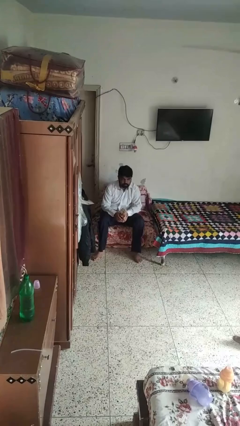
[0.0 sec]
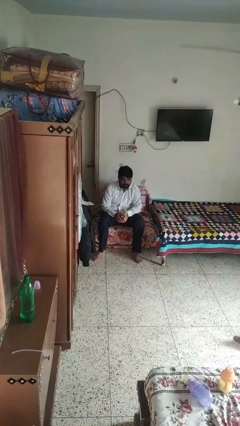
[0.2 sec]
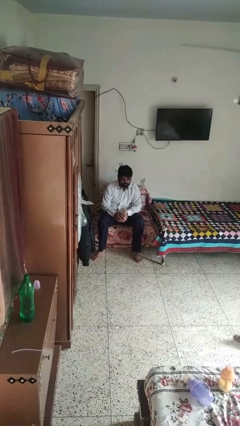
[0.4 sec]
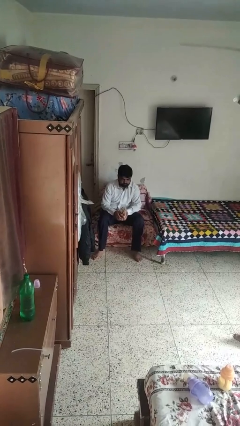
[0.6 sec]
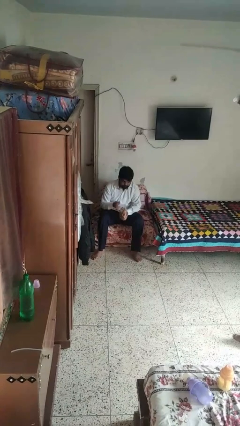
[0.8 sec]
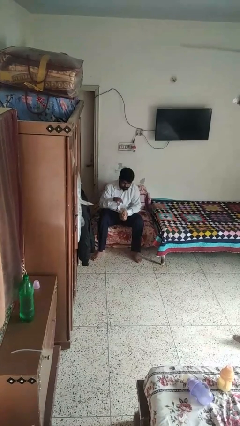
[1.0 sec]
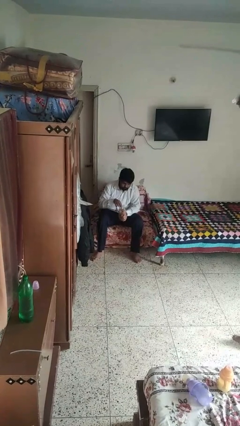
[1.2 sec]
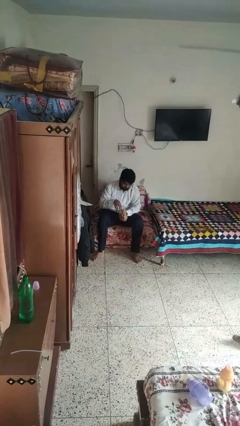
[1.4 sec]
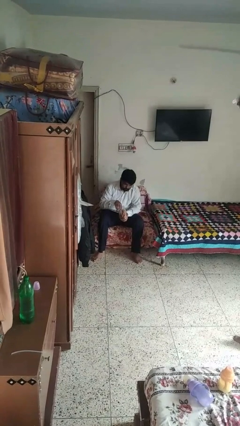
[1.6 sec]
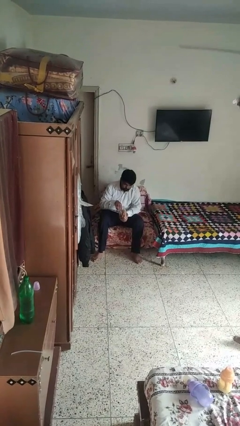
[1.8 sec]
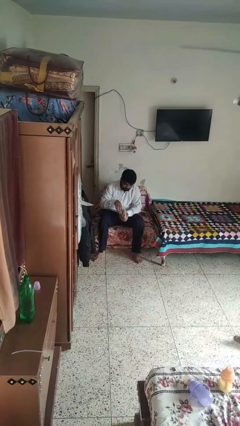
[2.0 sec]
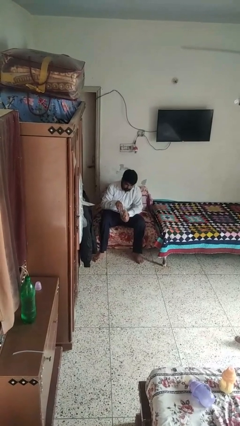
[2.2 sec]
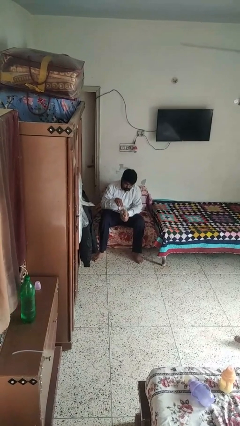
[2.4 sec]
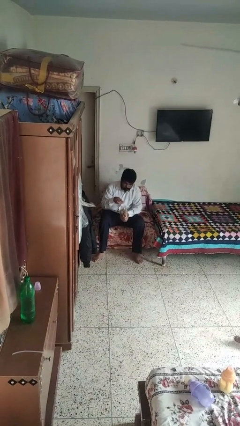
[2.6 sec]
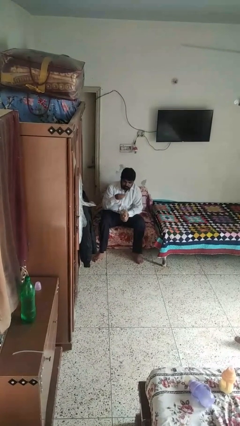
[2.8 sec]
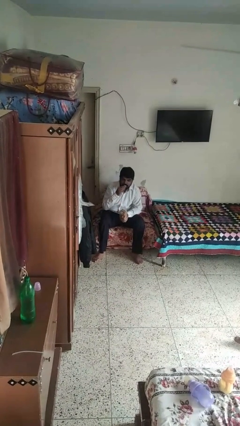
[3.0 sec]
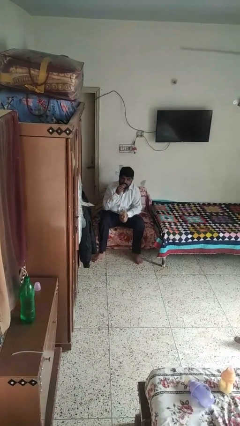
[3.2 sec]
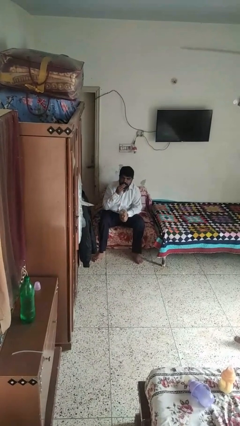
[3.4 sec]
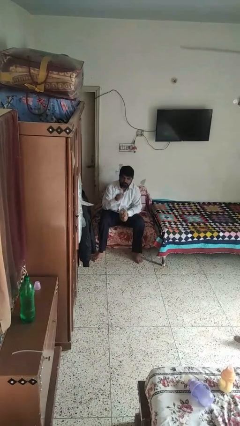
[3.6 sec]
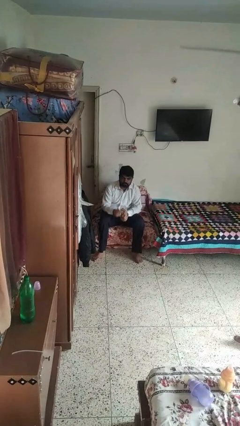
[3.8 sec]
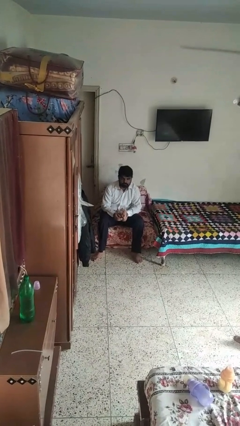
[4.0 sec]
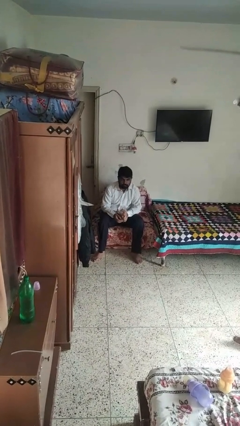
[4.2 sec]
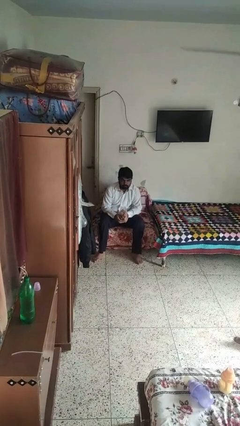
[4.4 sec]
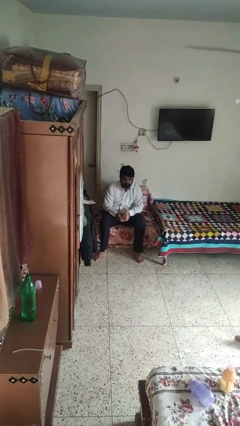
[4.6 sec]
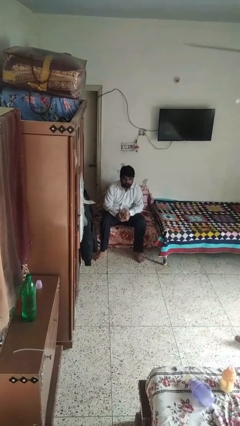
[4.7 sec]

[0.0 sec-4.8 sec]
person eats snack from bag

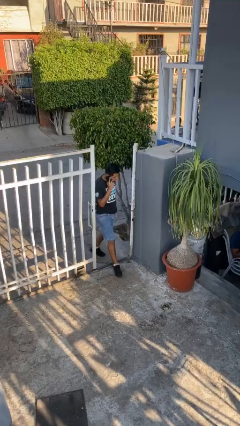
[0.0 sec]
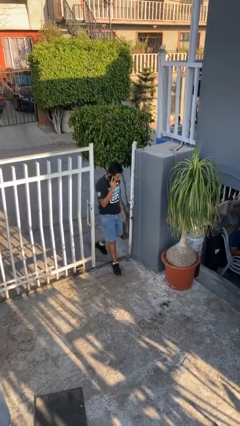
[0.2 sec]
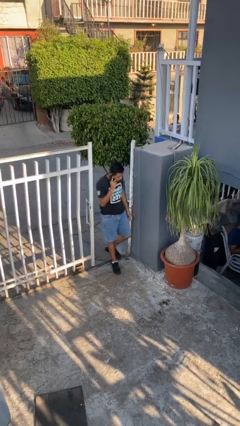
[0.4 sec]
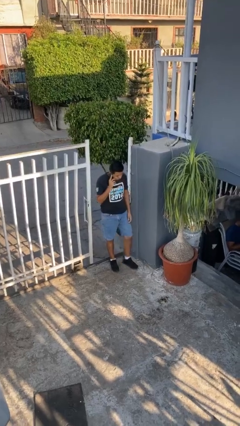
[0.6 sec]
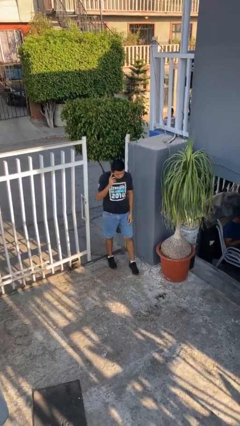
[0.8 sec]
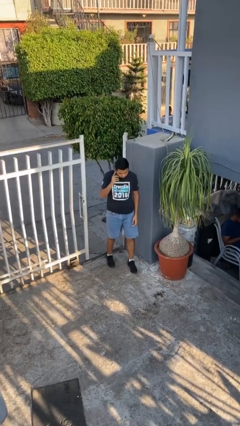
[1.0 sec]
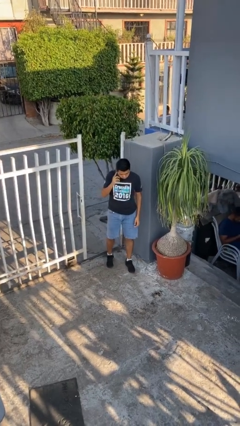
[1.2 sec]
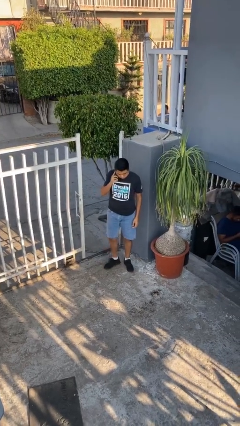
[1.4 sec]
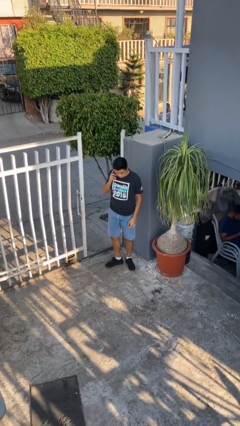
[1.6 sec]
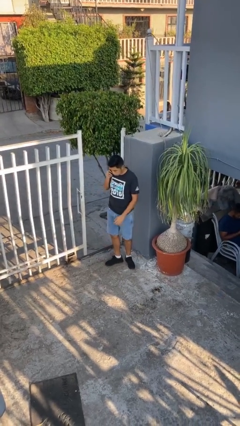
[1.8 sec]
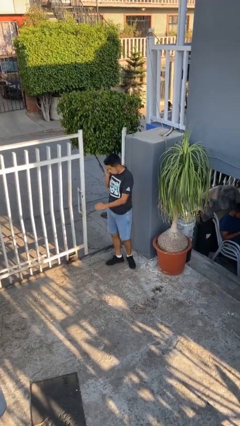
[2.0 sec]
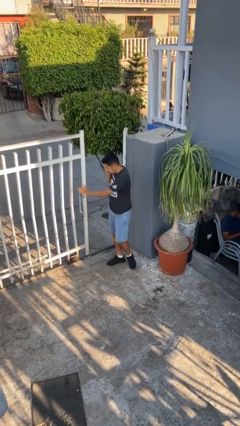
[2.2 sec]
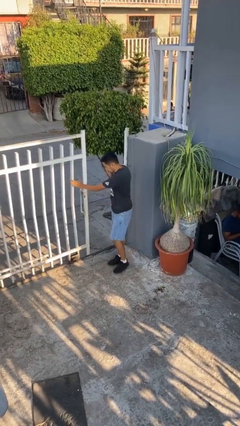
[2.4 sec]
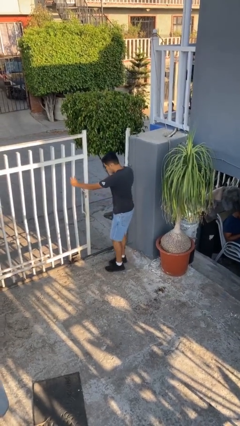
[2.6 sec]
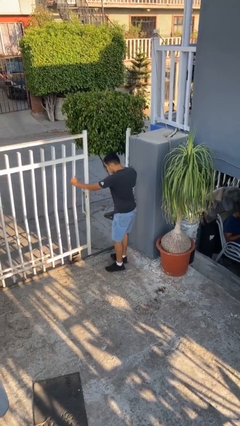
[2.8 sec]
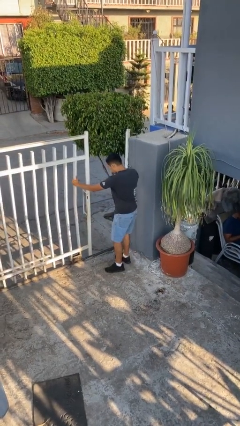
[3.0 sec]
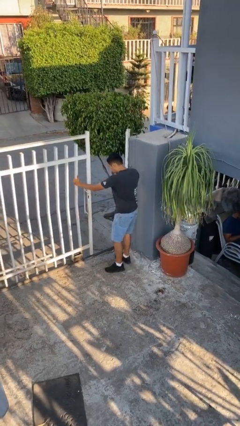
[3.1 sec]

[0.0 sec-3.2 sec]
person enters scene through structure

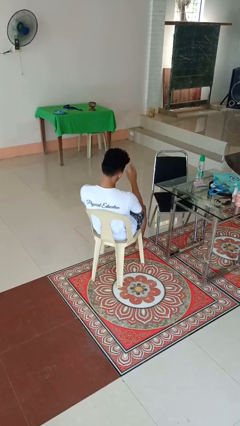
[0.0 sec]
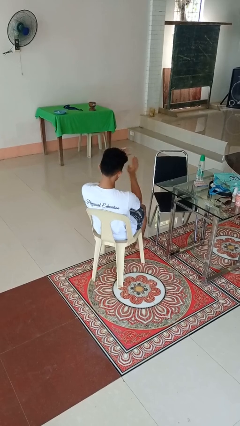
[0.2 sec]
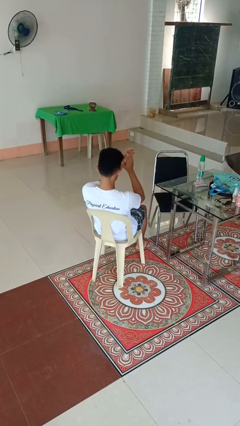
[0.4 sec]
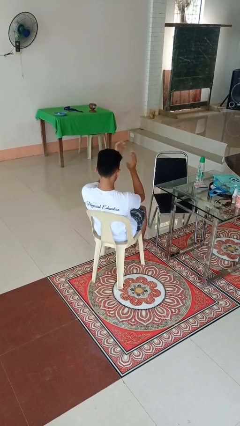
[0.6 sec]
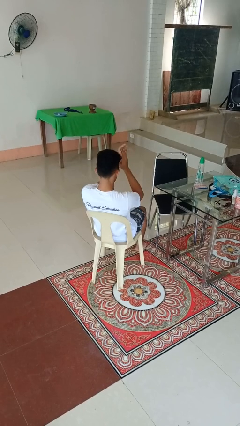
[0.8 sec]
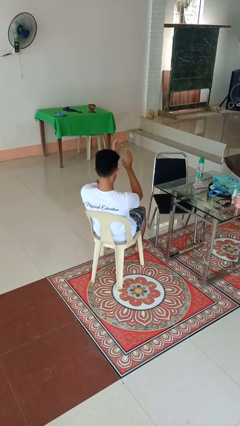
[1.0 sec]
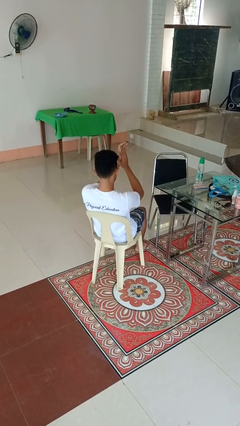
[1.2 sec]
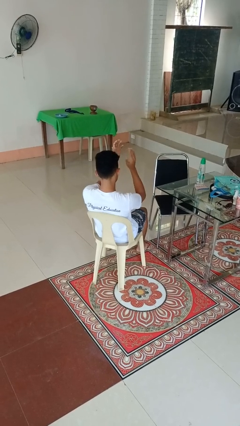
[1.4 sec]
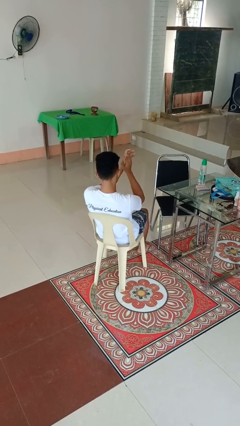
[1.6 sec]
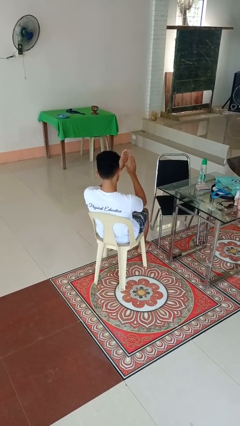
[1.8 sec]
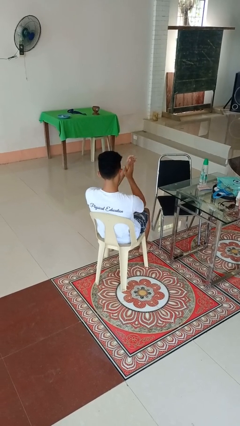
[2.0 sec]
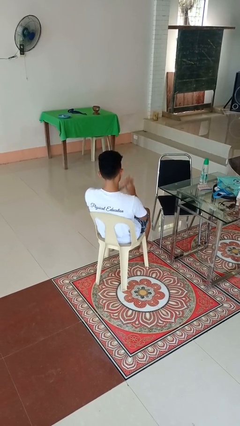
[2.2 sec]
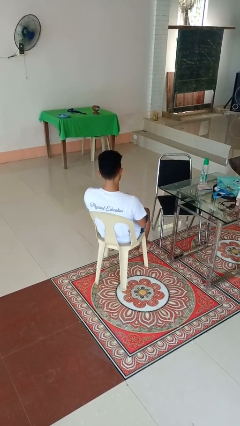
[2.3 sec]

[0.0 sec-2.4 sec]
person claps hands

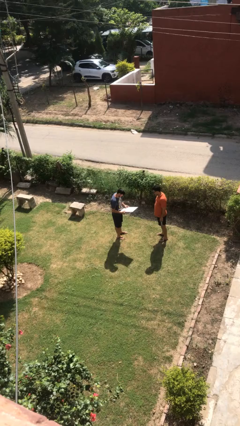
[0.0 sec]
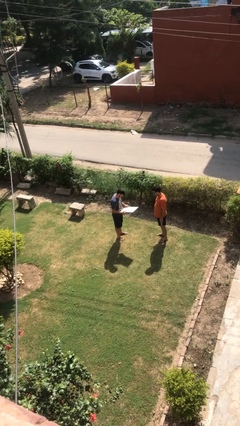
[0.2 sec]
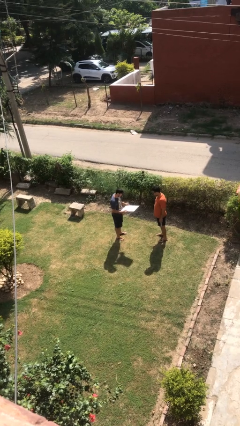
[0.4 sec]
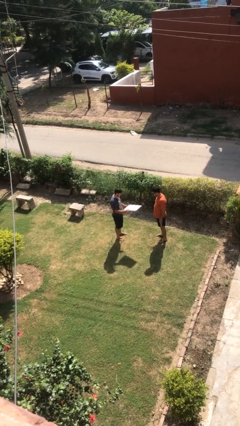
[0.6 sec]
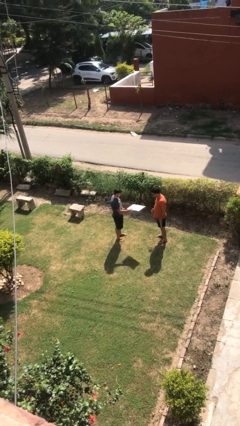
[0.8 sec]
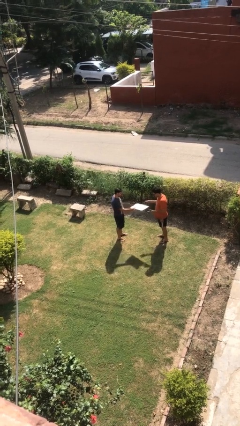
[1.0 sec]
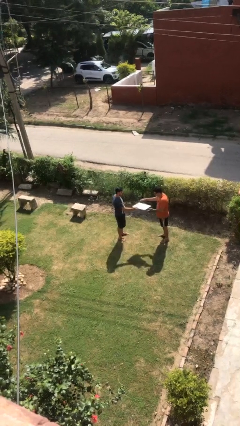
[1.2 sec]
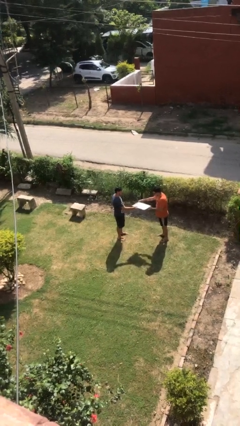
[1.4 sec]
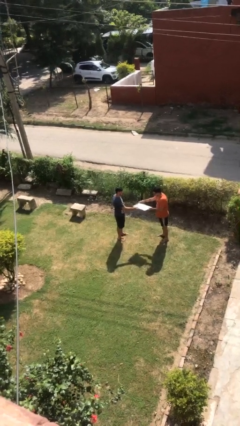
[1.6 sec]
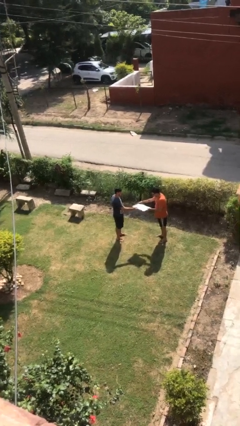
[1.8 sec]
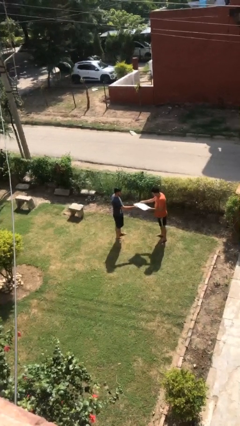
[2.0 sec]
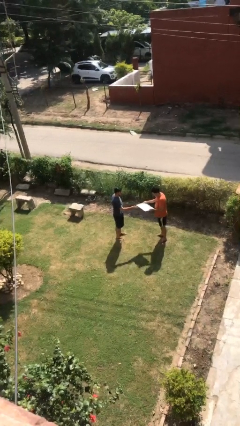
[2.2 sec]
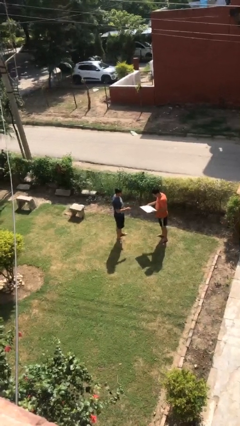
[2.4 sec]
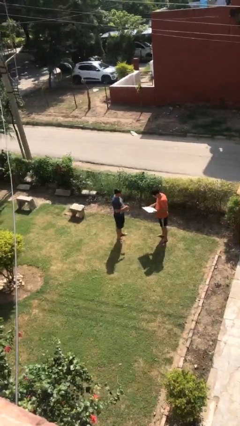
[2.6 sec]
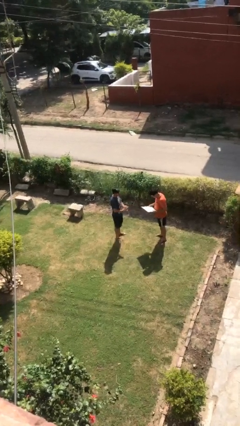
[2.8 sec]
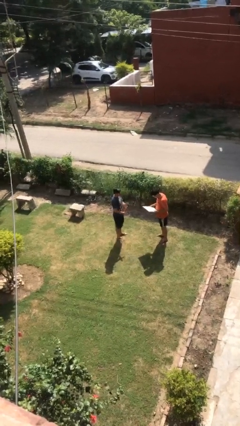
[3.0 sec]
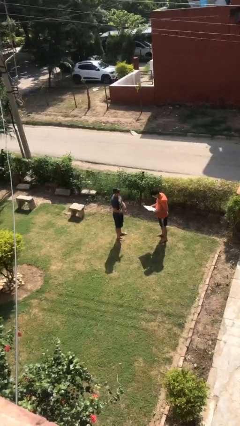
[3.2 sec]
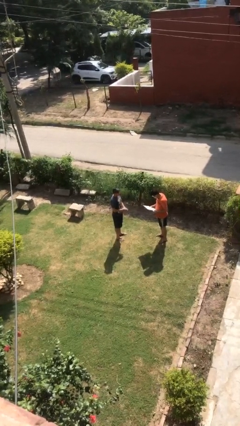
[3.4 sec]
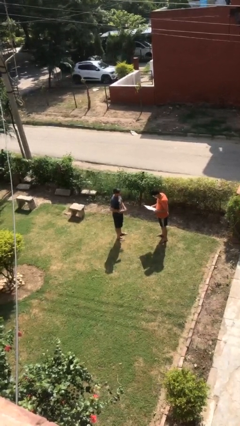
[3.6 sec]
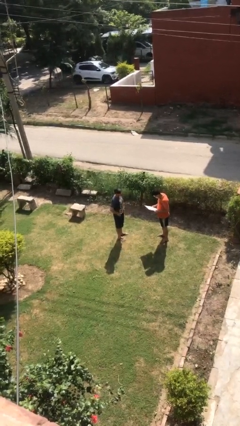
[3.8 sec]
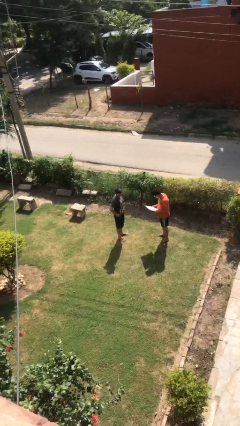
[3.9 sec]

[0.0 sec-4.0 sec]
person transfers object to person

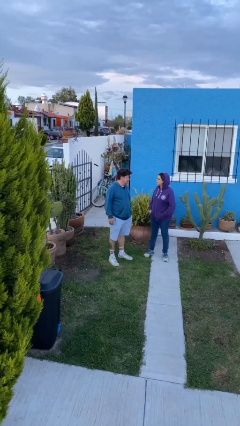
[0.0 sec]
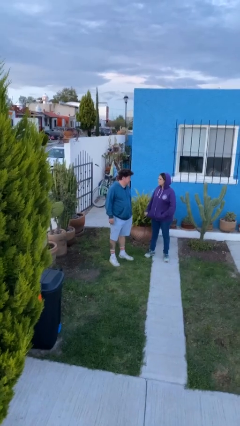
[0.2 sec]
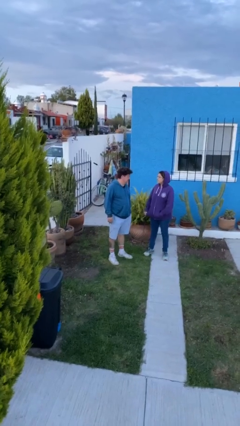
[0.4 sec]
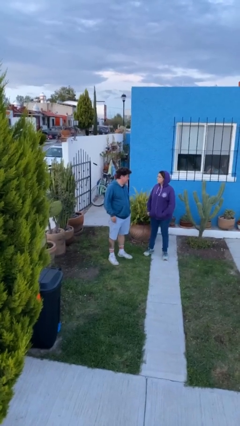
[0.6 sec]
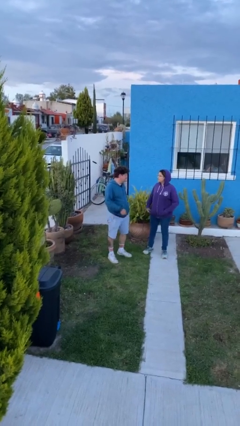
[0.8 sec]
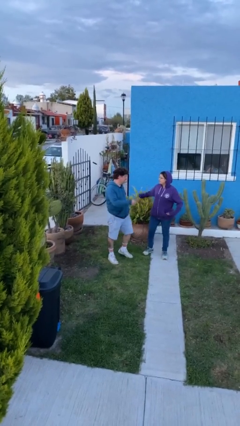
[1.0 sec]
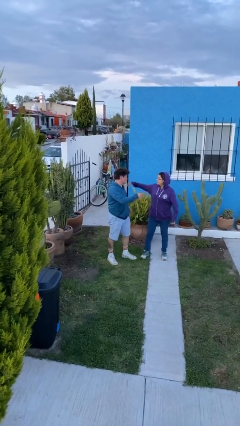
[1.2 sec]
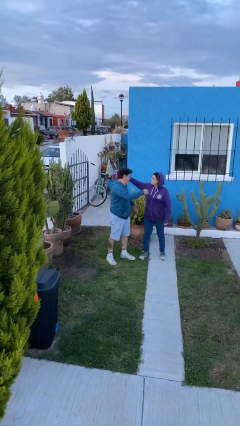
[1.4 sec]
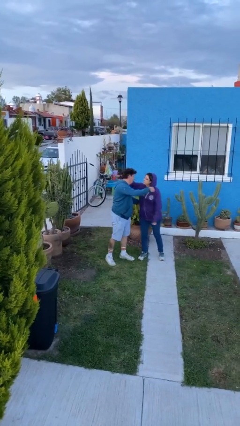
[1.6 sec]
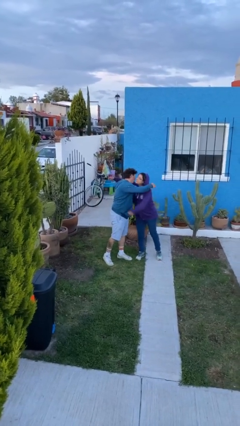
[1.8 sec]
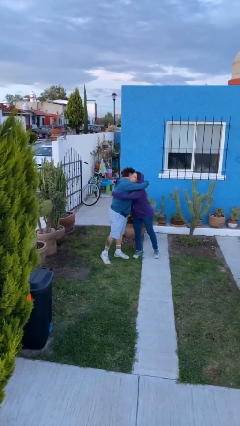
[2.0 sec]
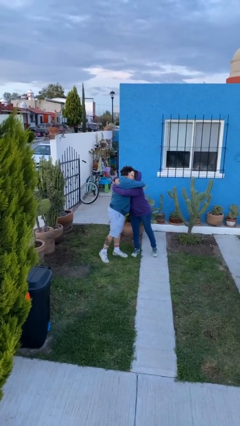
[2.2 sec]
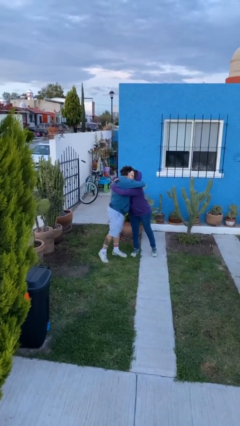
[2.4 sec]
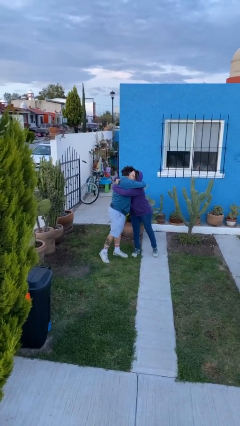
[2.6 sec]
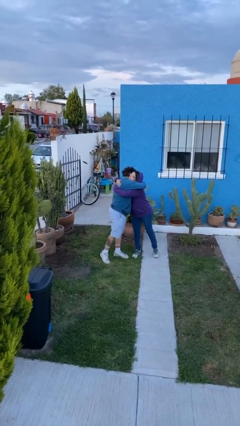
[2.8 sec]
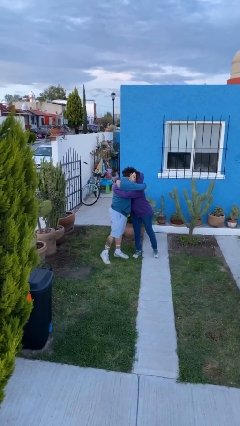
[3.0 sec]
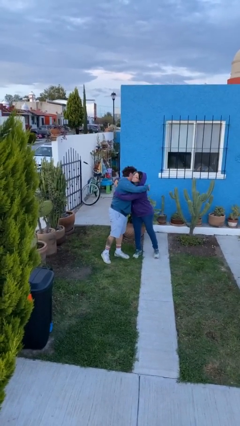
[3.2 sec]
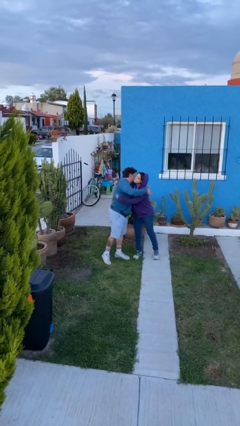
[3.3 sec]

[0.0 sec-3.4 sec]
person embraces person
